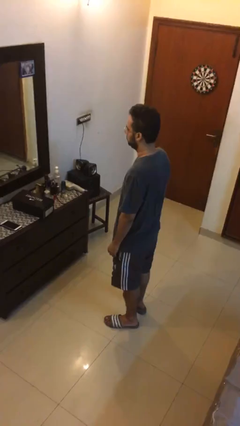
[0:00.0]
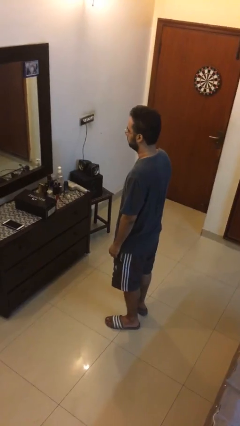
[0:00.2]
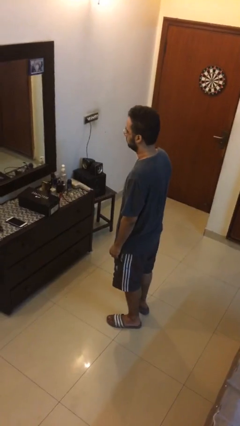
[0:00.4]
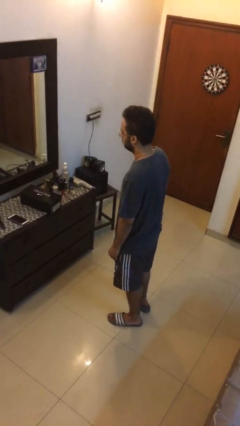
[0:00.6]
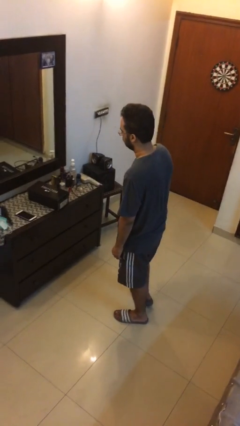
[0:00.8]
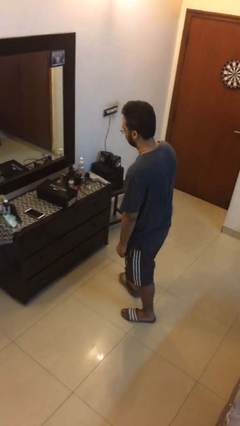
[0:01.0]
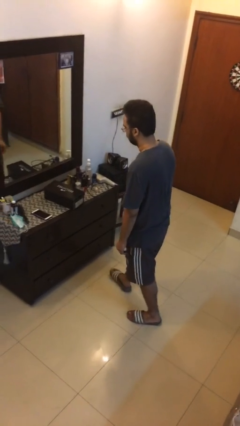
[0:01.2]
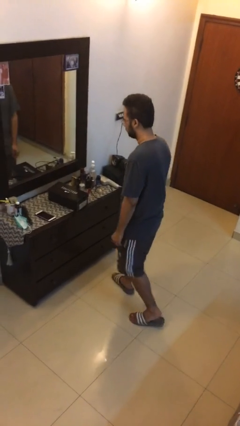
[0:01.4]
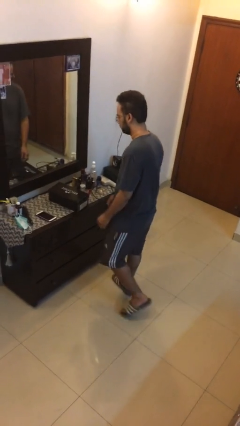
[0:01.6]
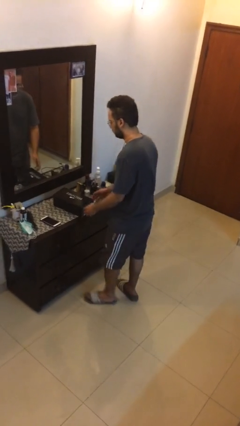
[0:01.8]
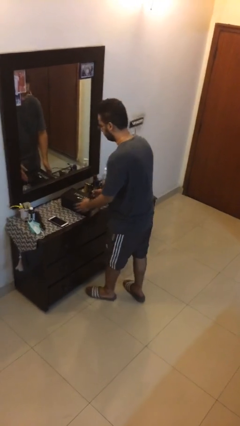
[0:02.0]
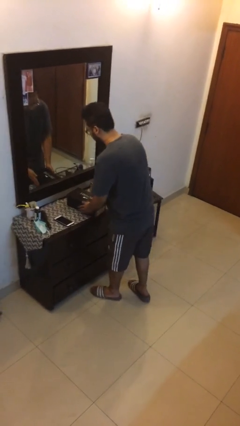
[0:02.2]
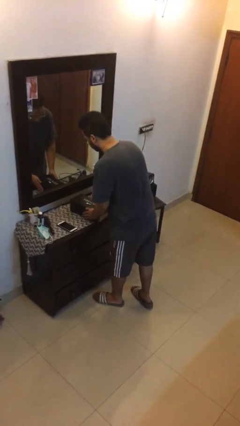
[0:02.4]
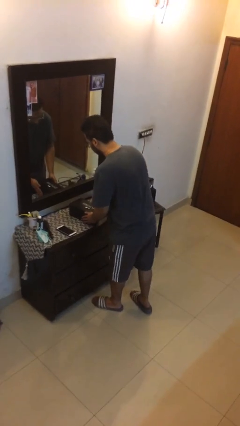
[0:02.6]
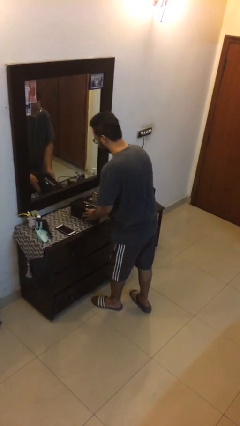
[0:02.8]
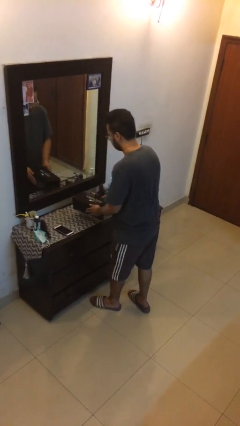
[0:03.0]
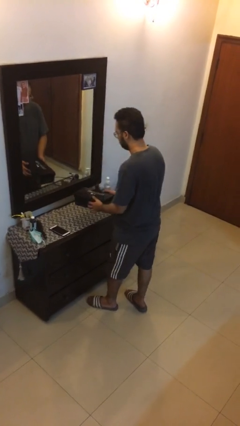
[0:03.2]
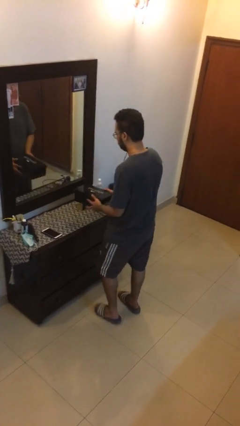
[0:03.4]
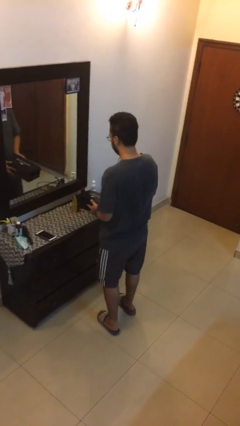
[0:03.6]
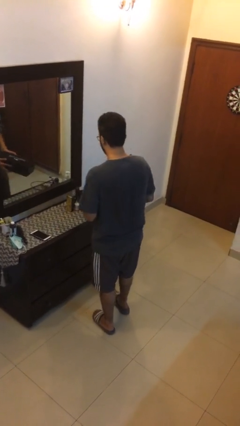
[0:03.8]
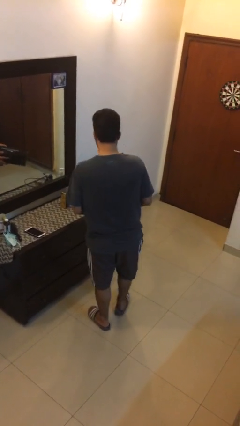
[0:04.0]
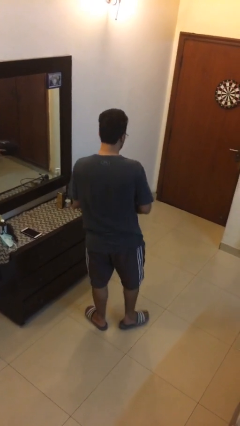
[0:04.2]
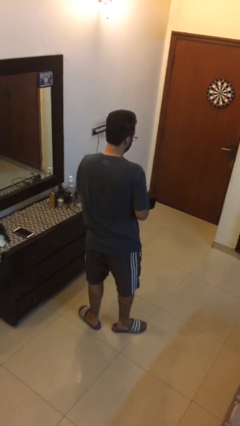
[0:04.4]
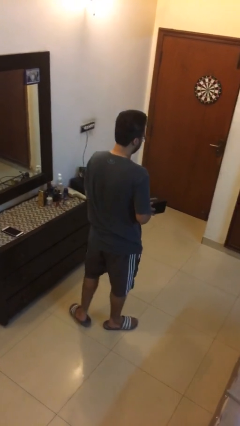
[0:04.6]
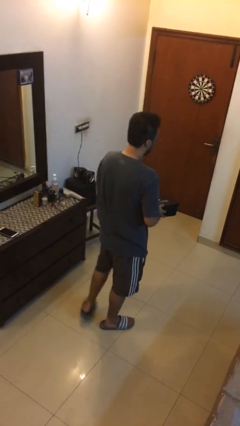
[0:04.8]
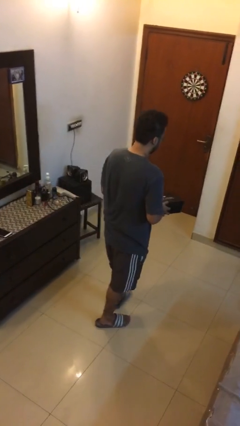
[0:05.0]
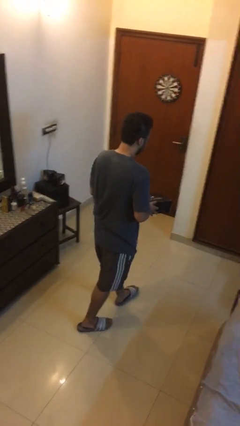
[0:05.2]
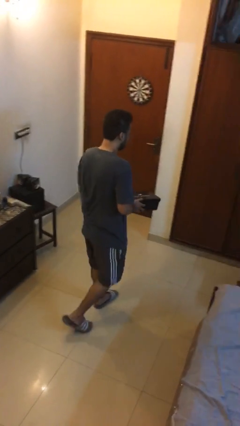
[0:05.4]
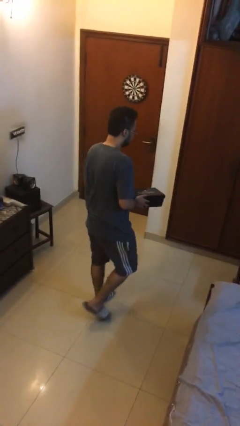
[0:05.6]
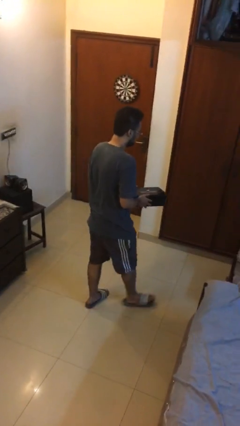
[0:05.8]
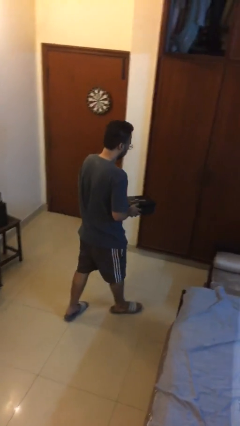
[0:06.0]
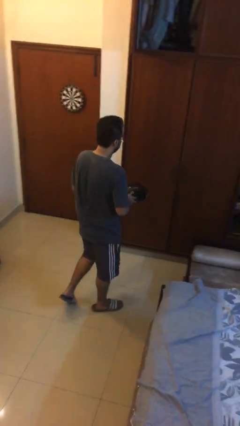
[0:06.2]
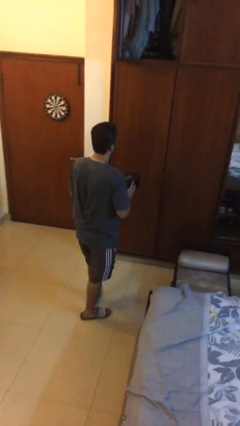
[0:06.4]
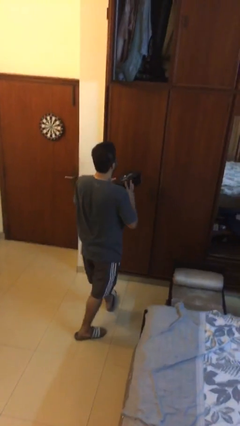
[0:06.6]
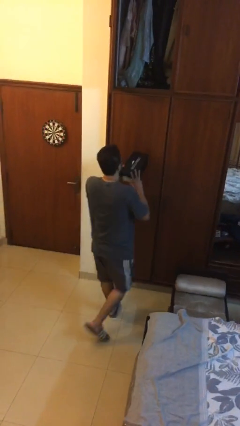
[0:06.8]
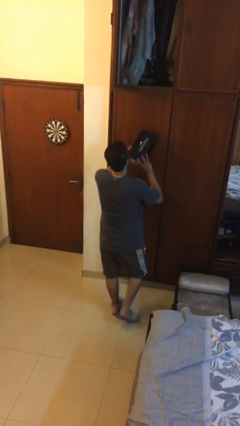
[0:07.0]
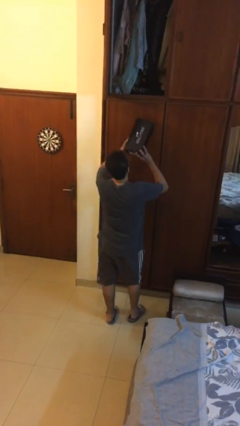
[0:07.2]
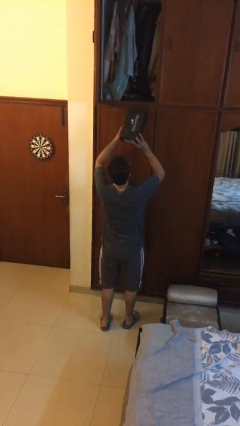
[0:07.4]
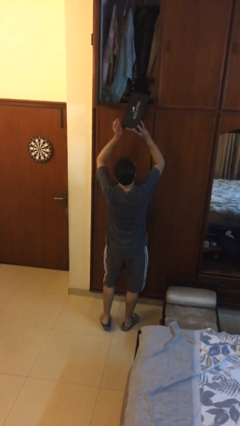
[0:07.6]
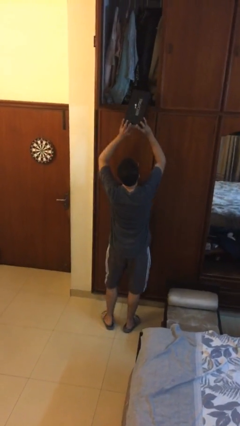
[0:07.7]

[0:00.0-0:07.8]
person picks up object from table

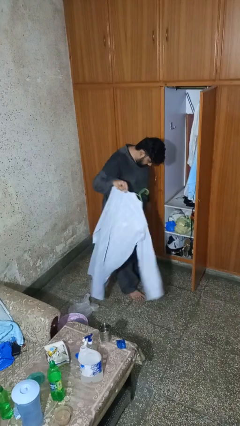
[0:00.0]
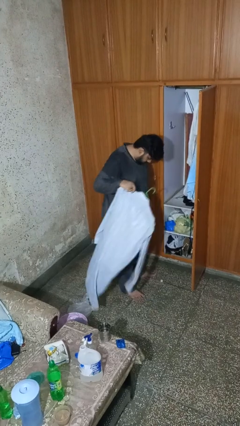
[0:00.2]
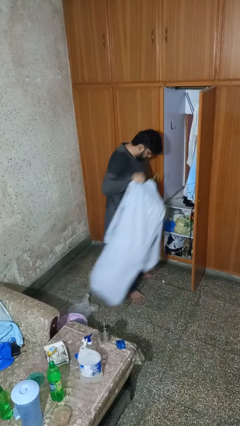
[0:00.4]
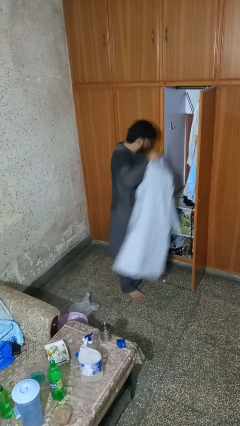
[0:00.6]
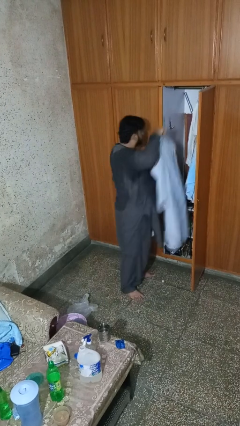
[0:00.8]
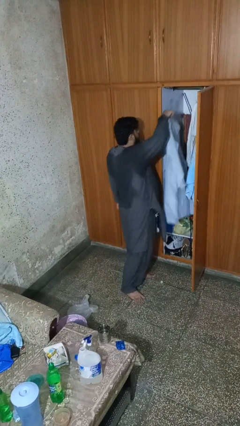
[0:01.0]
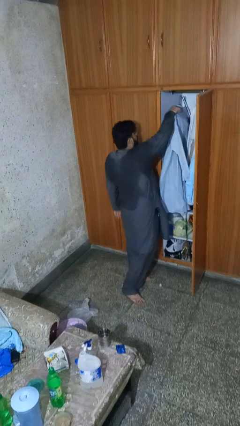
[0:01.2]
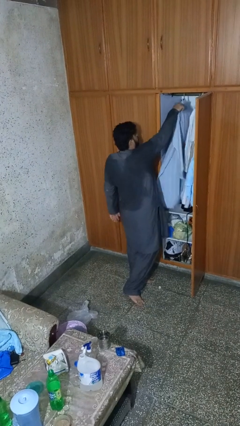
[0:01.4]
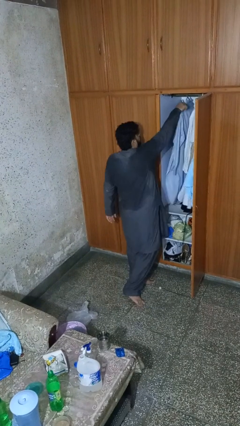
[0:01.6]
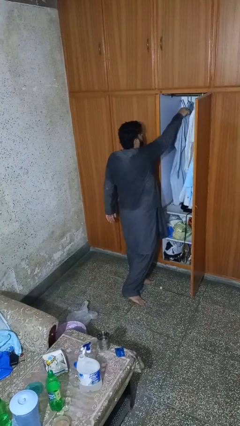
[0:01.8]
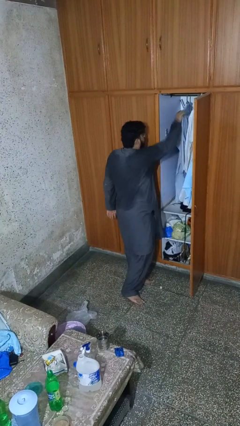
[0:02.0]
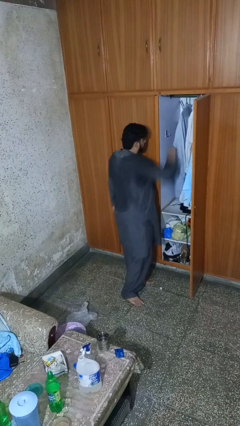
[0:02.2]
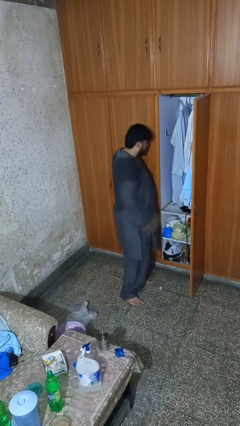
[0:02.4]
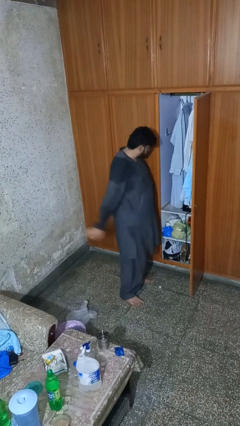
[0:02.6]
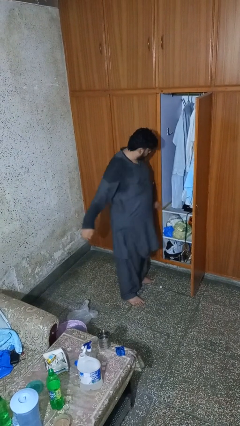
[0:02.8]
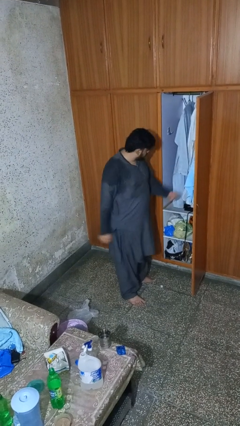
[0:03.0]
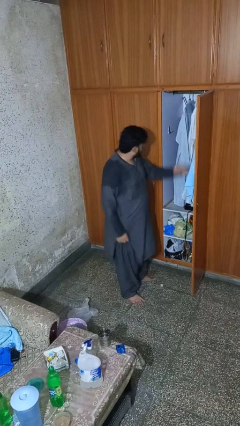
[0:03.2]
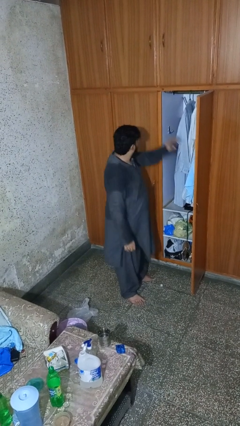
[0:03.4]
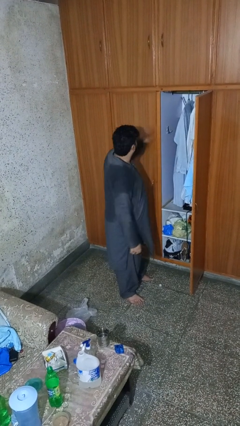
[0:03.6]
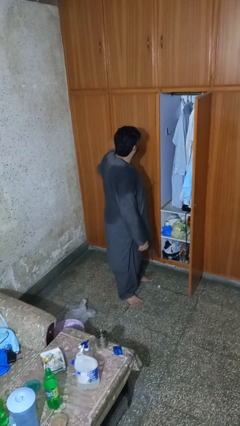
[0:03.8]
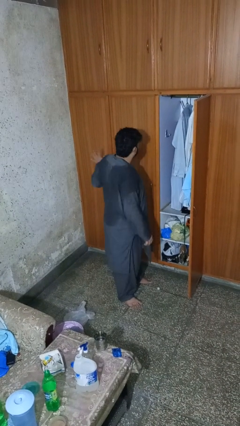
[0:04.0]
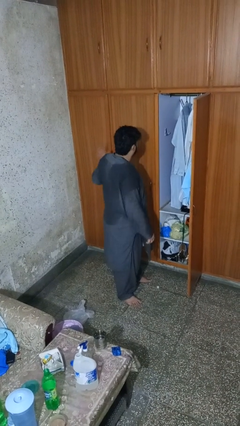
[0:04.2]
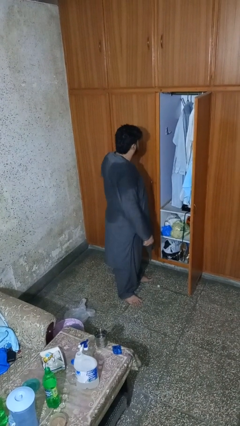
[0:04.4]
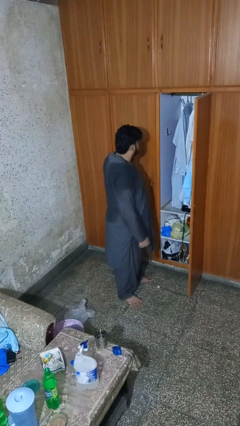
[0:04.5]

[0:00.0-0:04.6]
person puts clothes into closet

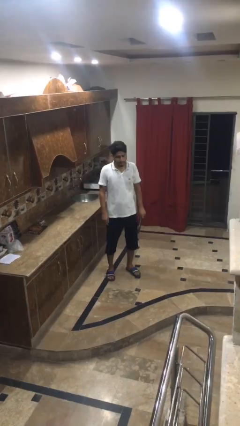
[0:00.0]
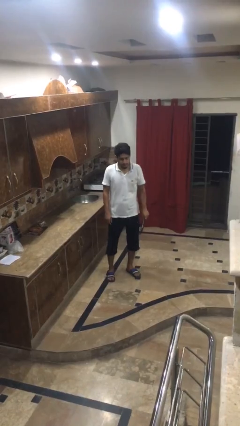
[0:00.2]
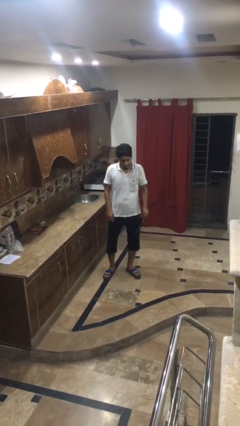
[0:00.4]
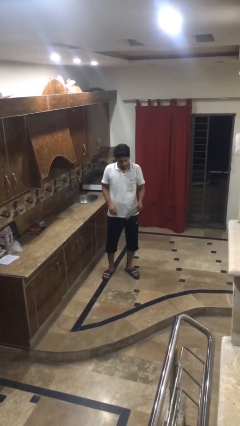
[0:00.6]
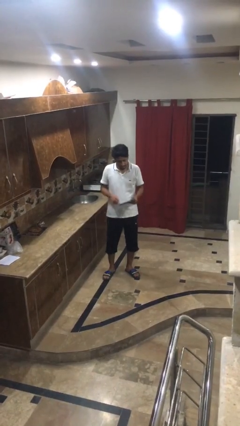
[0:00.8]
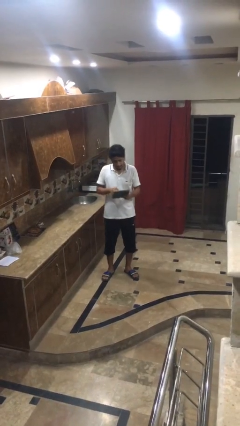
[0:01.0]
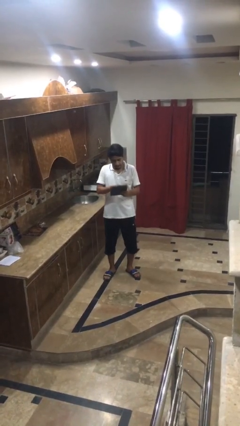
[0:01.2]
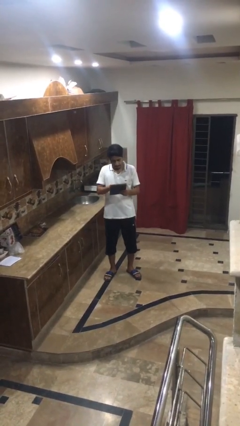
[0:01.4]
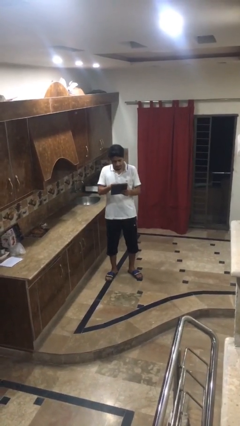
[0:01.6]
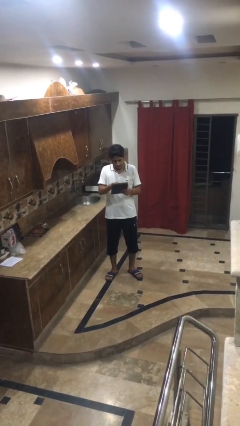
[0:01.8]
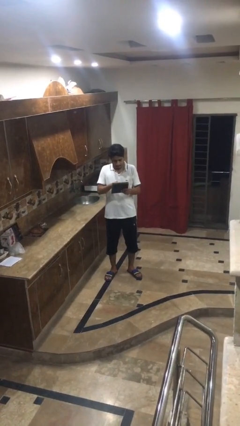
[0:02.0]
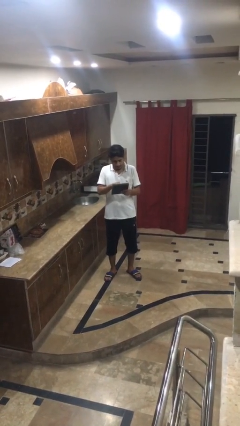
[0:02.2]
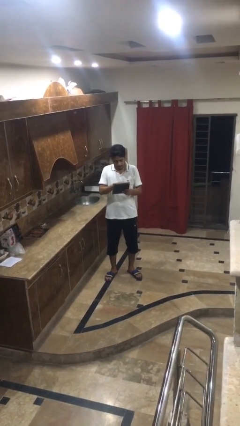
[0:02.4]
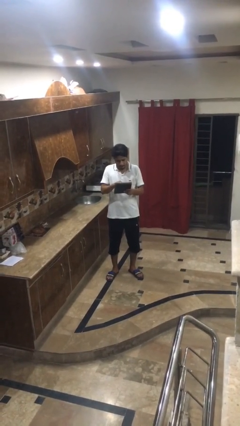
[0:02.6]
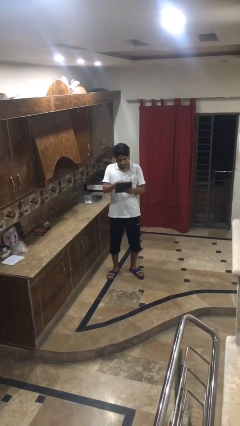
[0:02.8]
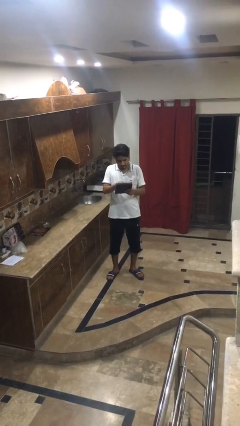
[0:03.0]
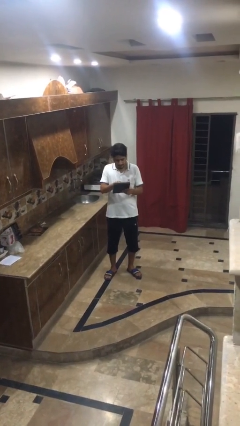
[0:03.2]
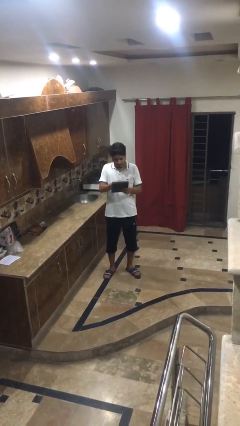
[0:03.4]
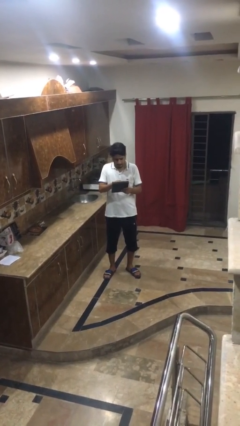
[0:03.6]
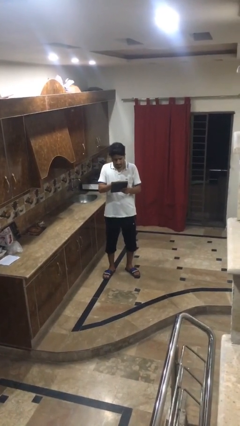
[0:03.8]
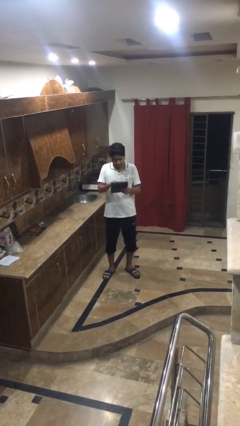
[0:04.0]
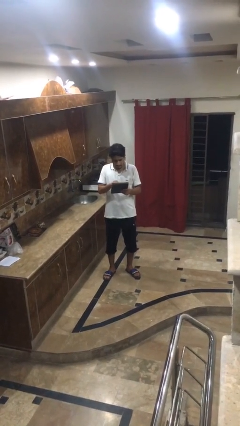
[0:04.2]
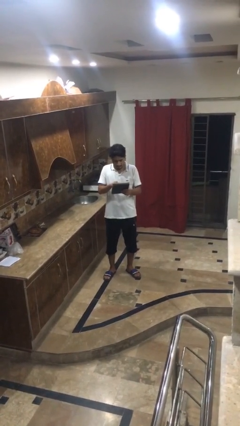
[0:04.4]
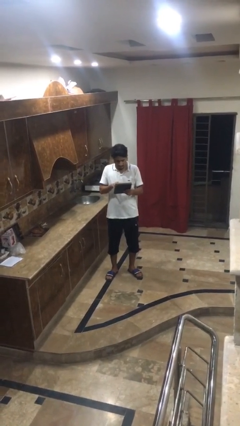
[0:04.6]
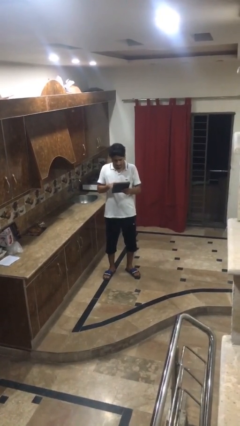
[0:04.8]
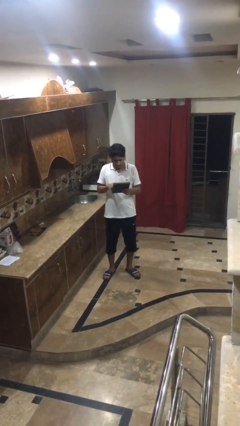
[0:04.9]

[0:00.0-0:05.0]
person interacts with tablet

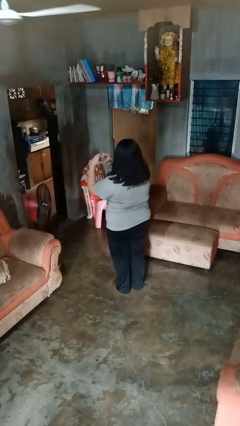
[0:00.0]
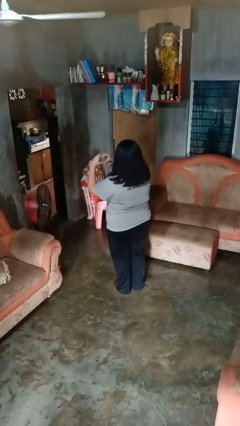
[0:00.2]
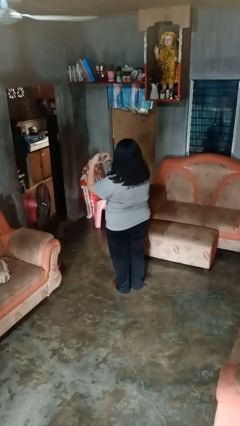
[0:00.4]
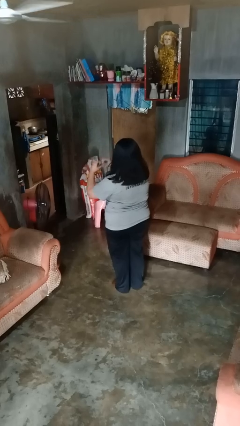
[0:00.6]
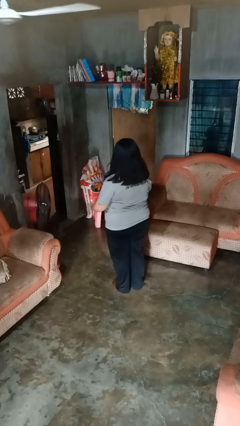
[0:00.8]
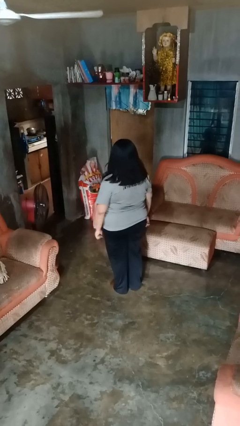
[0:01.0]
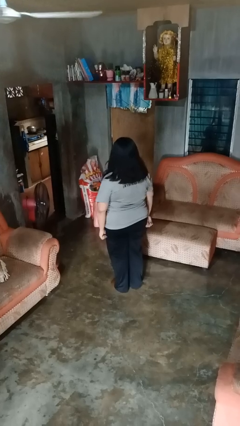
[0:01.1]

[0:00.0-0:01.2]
person gestures heart
